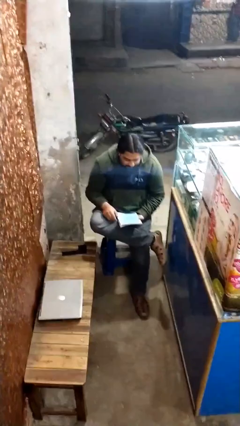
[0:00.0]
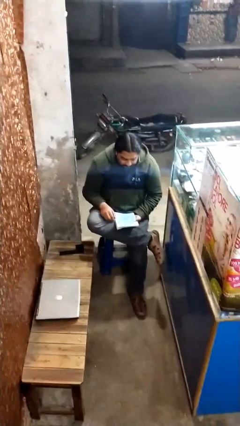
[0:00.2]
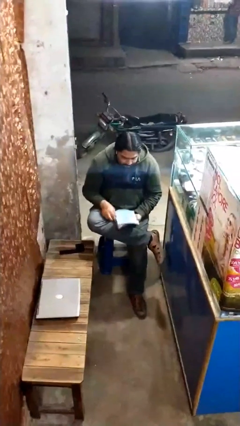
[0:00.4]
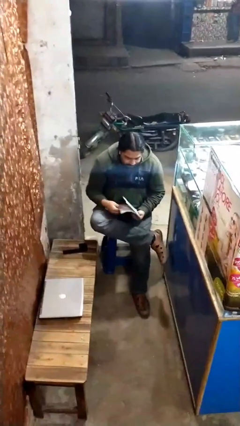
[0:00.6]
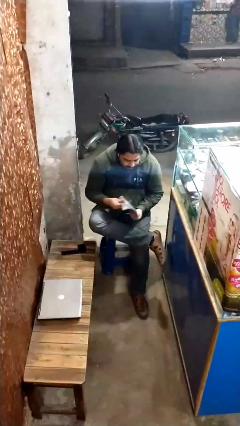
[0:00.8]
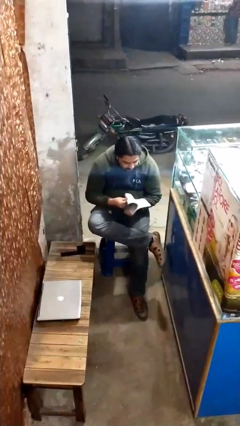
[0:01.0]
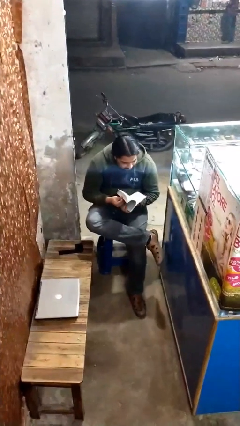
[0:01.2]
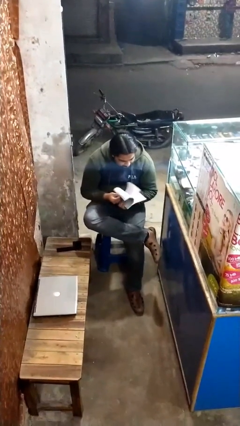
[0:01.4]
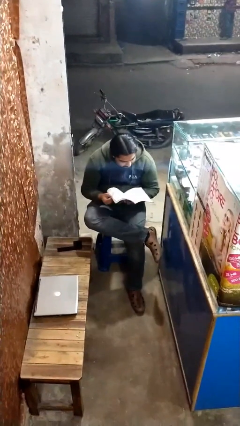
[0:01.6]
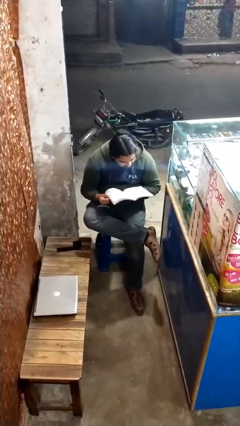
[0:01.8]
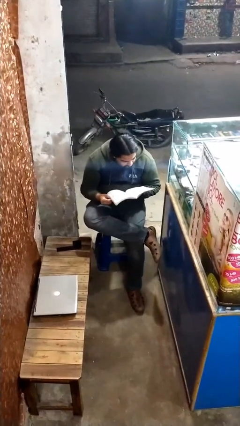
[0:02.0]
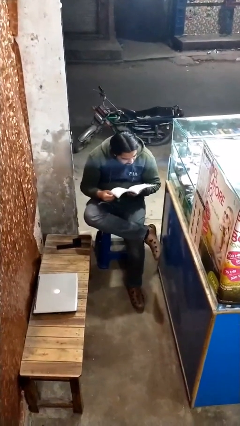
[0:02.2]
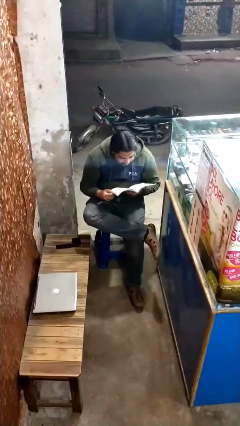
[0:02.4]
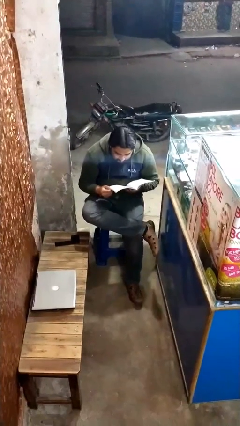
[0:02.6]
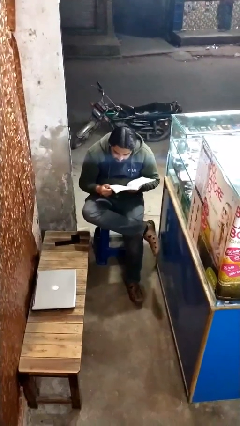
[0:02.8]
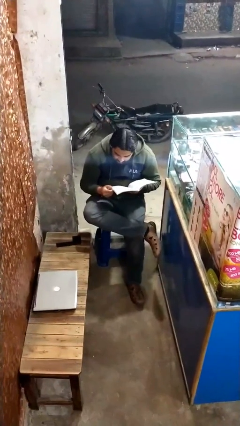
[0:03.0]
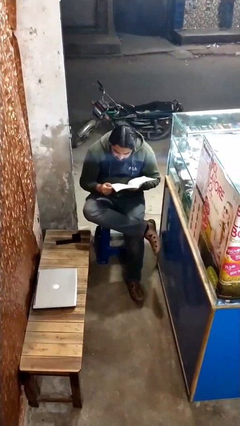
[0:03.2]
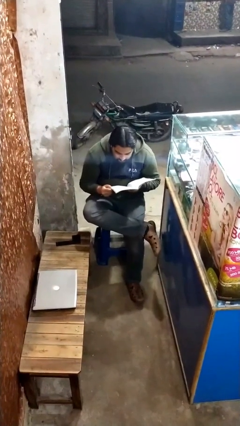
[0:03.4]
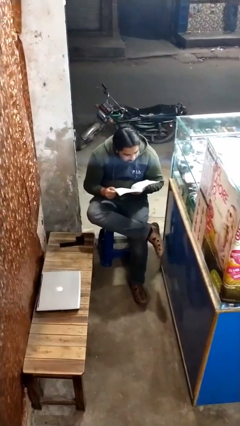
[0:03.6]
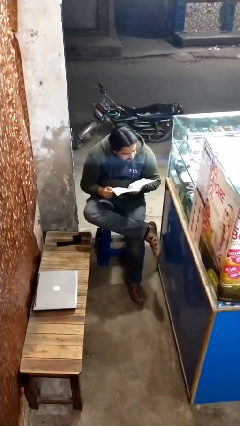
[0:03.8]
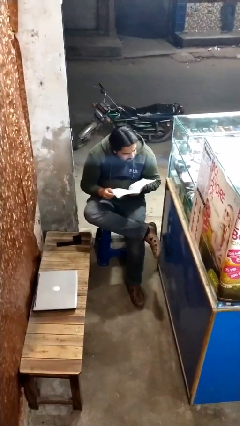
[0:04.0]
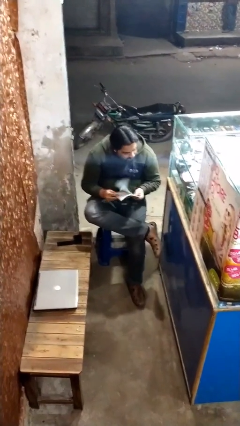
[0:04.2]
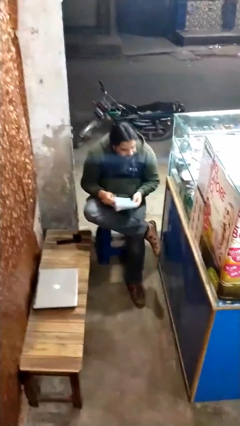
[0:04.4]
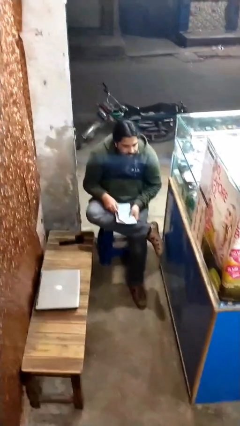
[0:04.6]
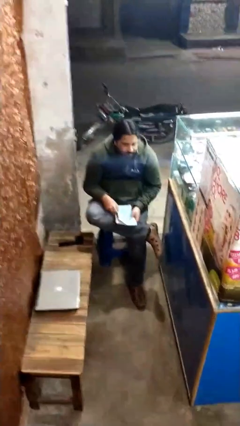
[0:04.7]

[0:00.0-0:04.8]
person reads document

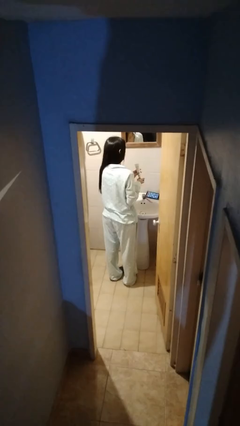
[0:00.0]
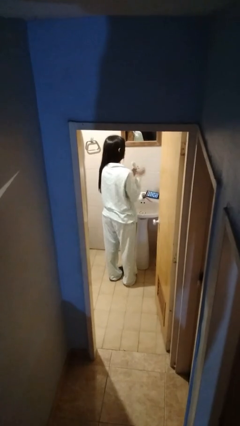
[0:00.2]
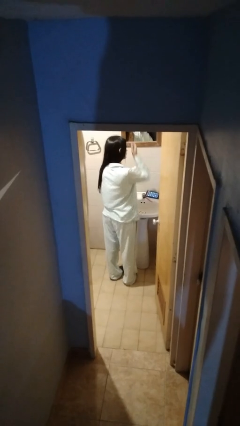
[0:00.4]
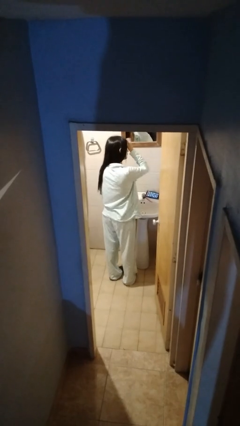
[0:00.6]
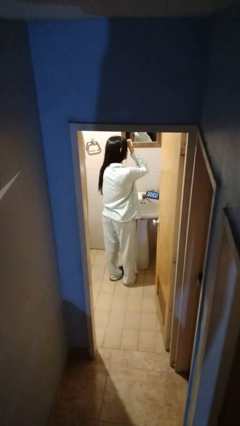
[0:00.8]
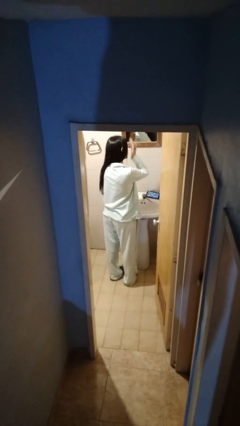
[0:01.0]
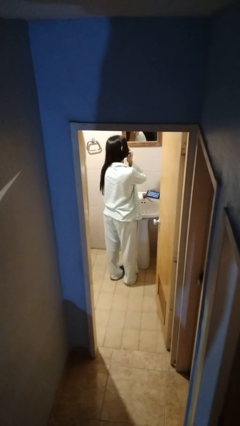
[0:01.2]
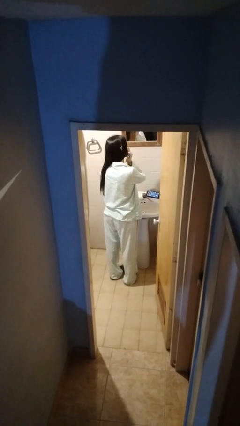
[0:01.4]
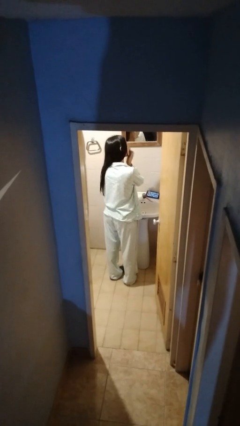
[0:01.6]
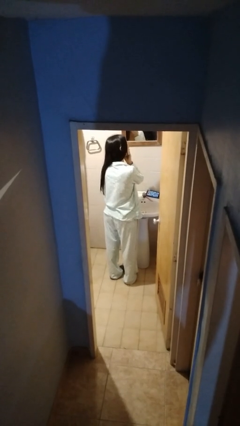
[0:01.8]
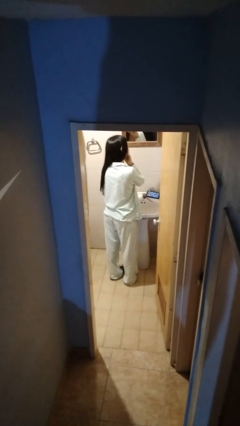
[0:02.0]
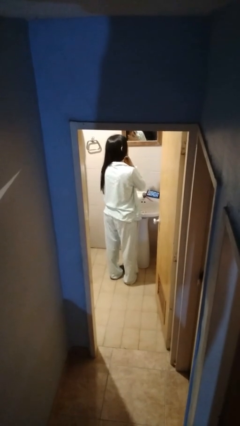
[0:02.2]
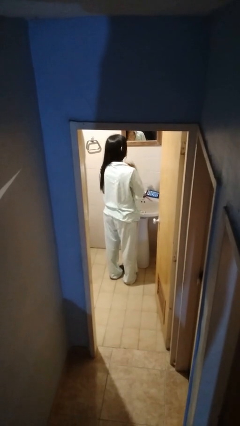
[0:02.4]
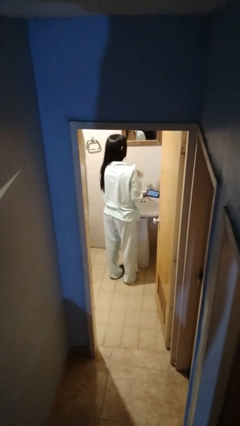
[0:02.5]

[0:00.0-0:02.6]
person applies facial moisturizer

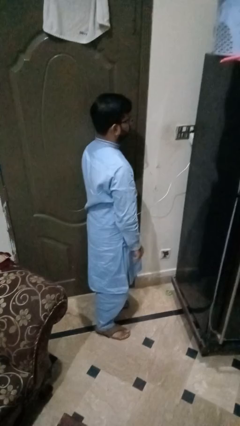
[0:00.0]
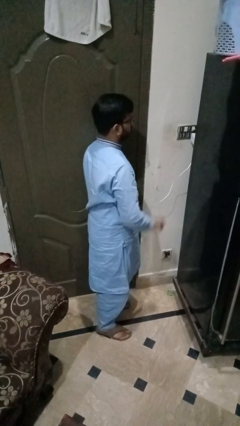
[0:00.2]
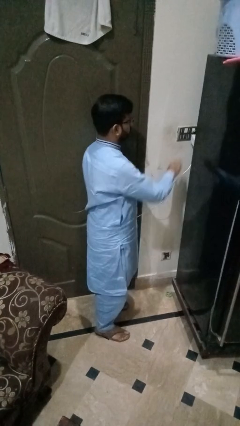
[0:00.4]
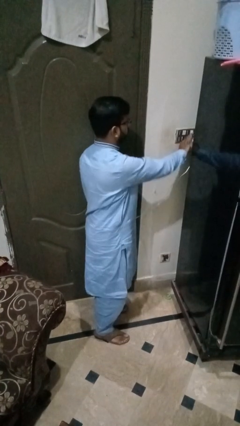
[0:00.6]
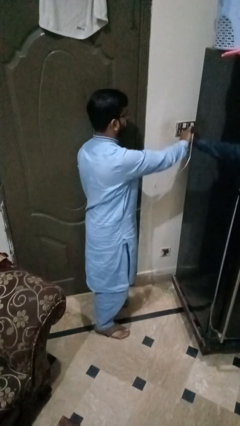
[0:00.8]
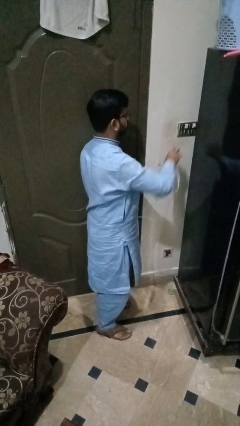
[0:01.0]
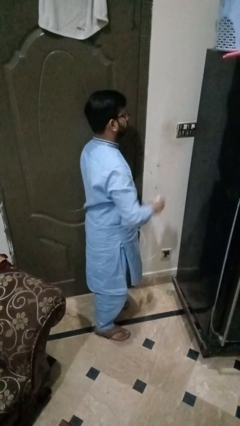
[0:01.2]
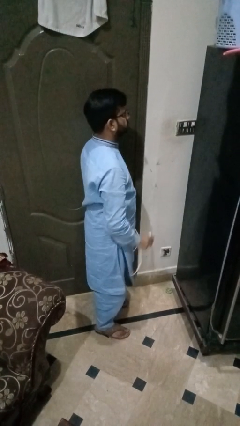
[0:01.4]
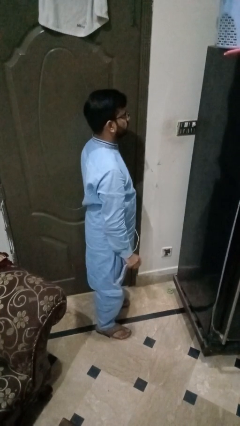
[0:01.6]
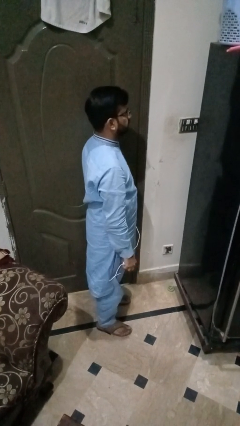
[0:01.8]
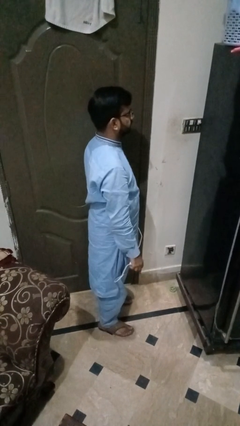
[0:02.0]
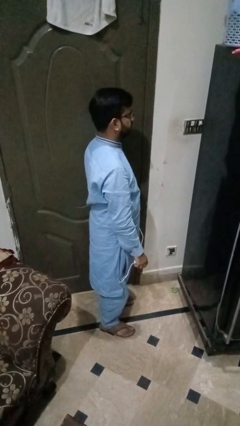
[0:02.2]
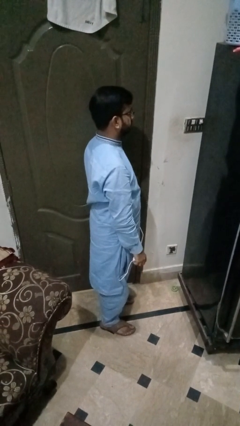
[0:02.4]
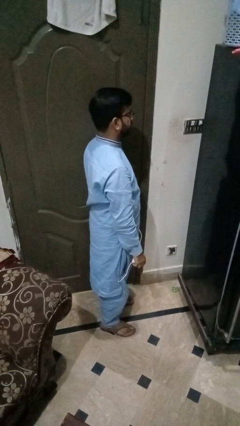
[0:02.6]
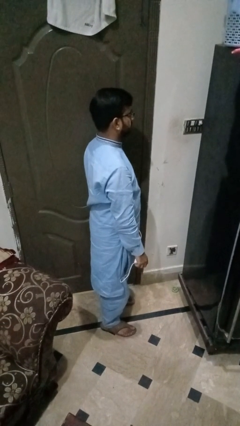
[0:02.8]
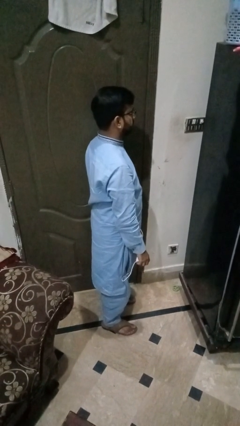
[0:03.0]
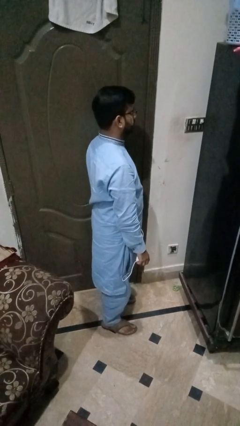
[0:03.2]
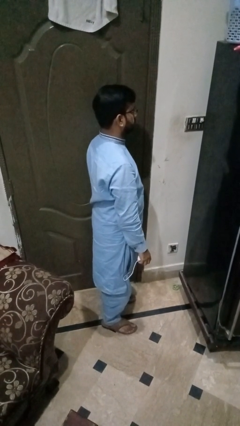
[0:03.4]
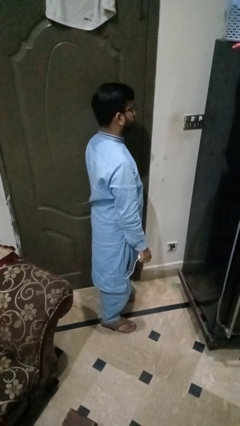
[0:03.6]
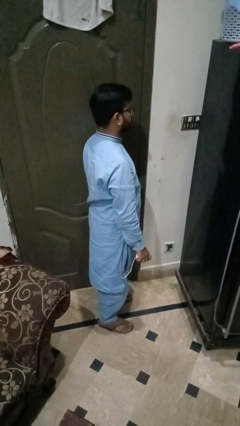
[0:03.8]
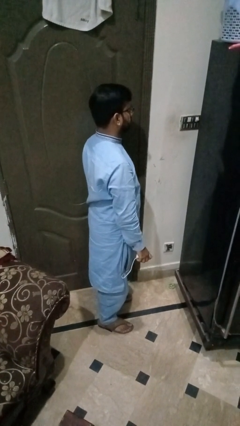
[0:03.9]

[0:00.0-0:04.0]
person unplugs from electrical socket

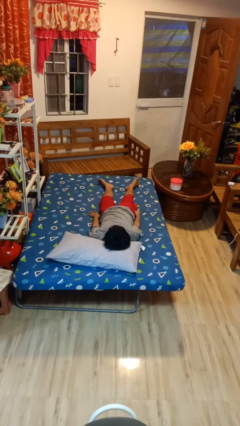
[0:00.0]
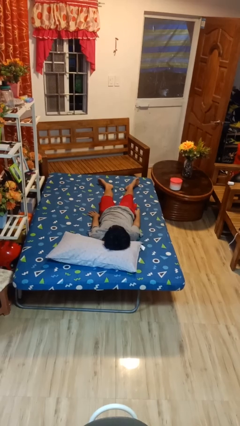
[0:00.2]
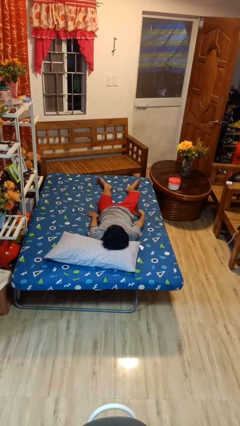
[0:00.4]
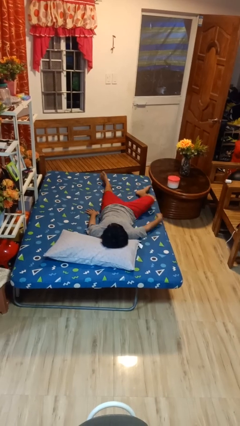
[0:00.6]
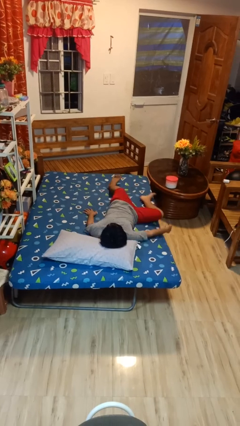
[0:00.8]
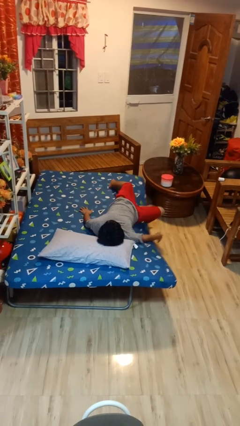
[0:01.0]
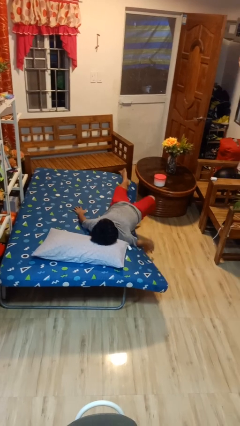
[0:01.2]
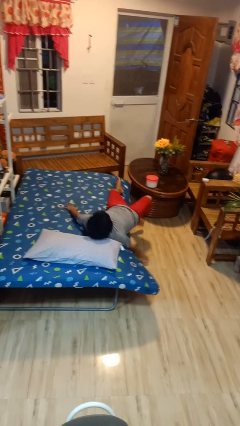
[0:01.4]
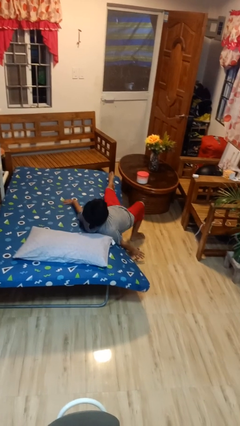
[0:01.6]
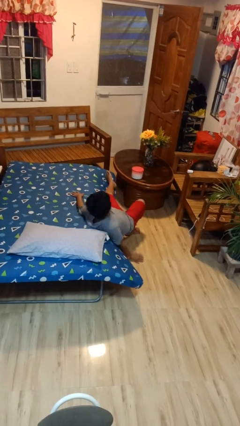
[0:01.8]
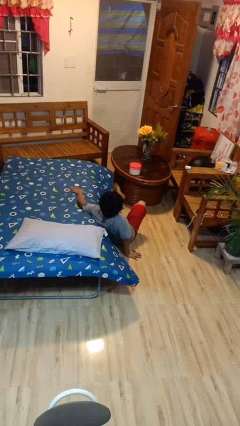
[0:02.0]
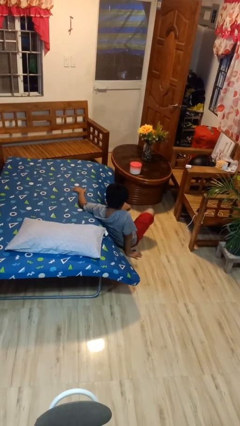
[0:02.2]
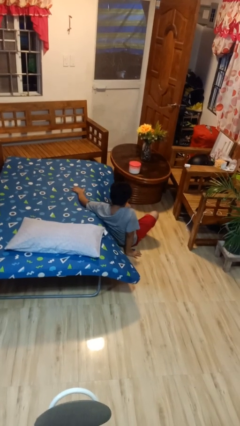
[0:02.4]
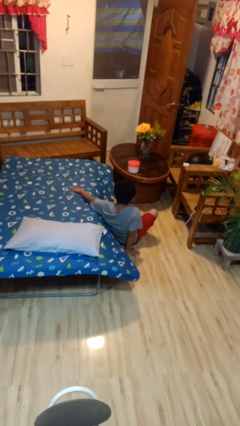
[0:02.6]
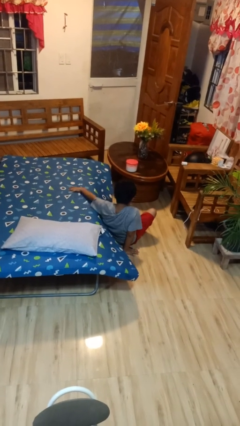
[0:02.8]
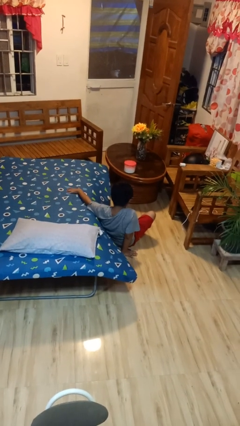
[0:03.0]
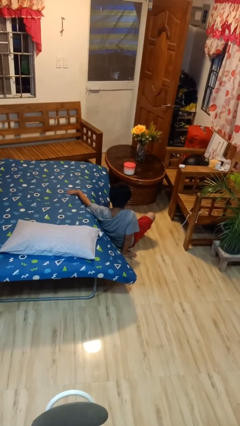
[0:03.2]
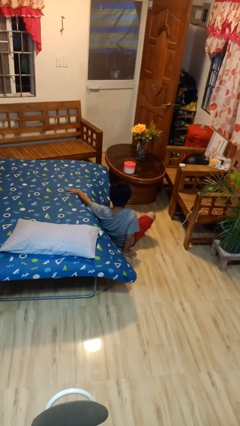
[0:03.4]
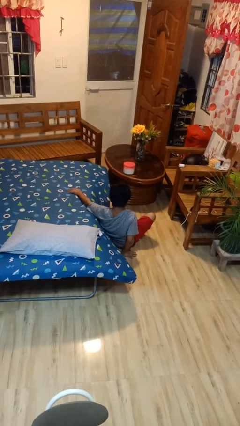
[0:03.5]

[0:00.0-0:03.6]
person falls from bed

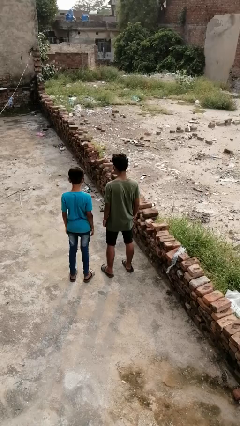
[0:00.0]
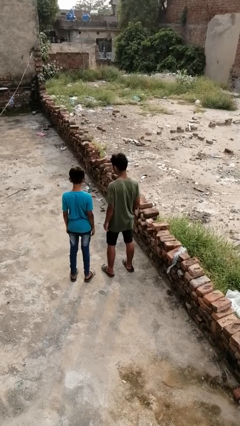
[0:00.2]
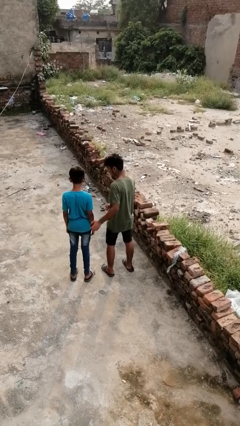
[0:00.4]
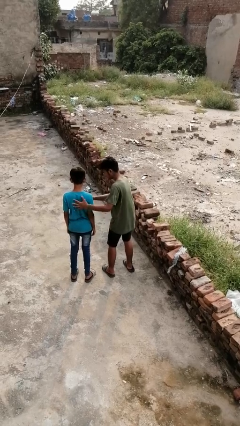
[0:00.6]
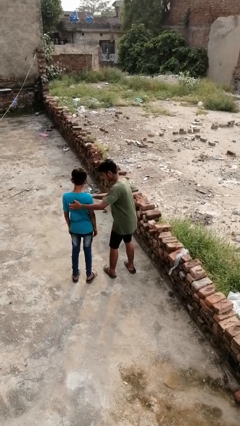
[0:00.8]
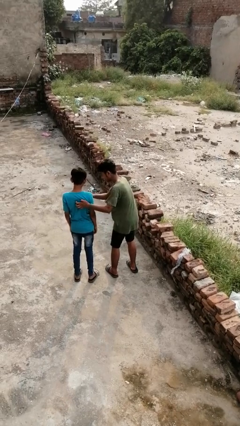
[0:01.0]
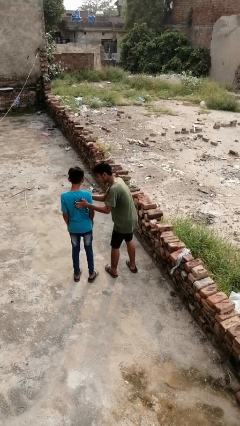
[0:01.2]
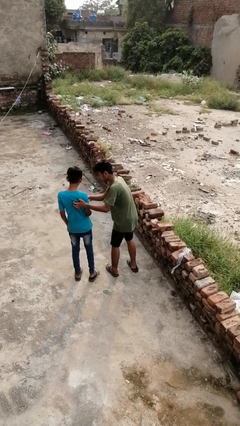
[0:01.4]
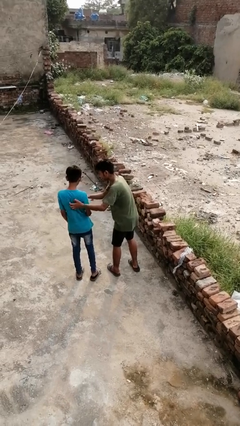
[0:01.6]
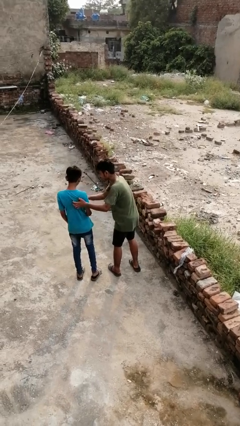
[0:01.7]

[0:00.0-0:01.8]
person tickles person

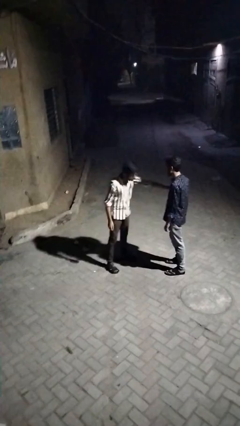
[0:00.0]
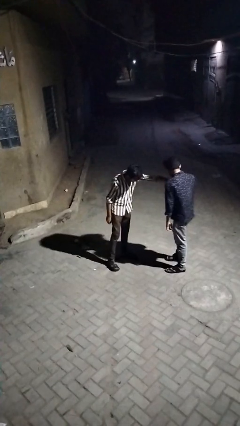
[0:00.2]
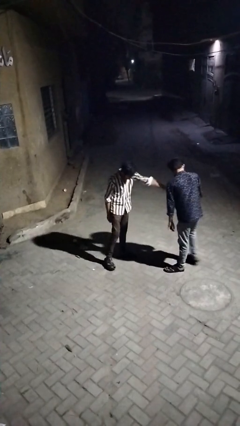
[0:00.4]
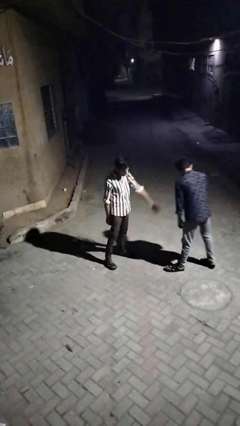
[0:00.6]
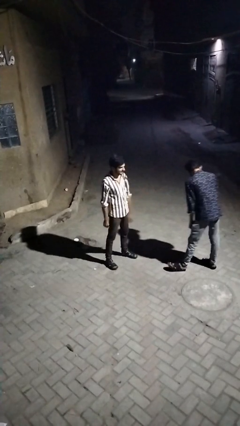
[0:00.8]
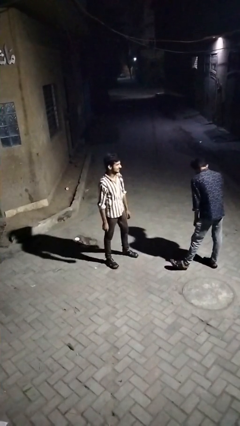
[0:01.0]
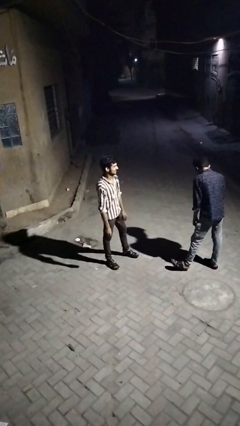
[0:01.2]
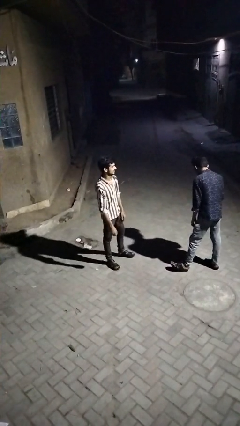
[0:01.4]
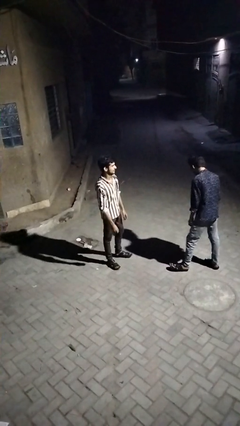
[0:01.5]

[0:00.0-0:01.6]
person shoves person
